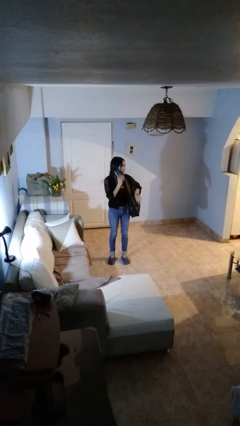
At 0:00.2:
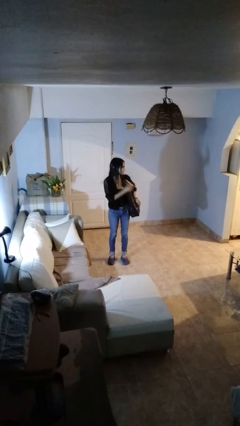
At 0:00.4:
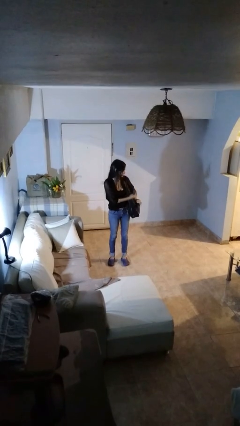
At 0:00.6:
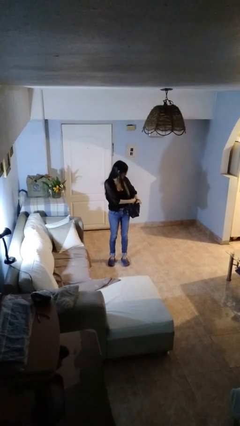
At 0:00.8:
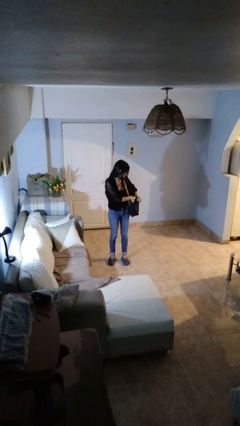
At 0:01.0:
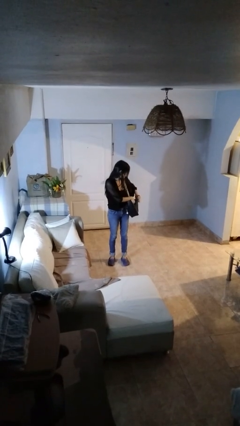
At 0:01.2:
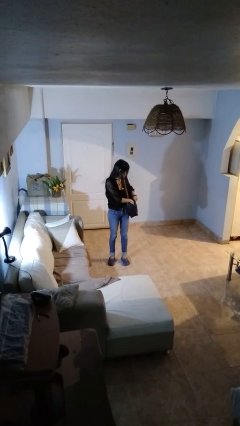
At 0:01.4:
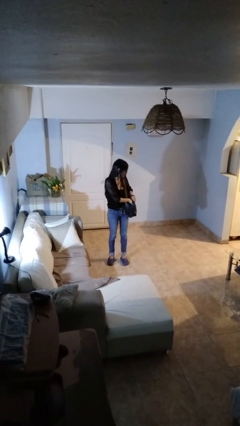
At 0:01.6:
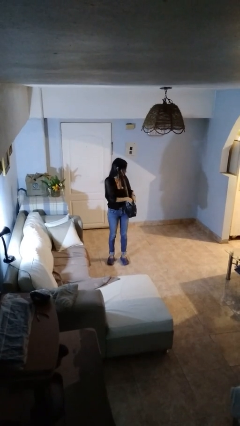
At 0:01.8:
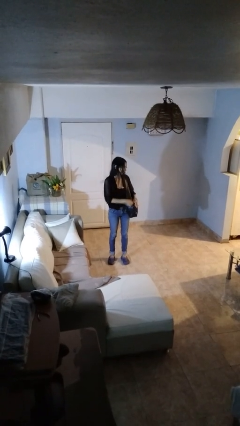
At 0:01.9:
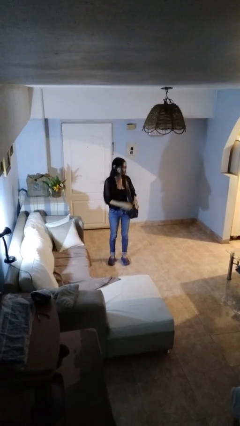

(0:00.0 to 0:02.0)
person puts object into purse

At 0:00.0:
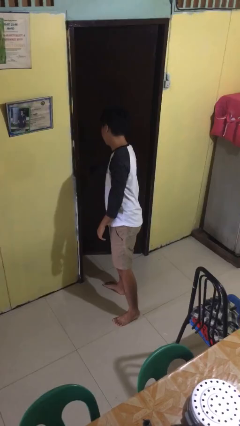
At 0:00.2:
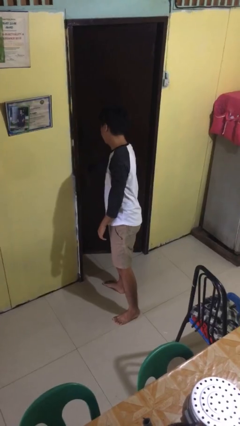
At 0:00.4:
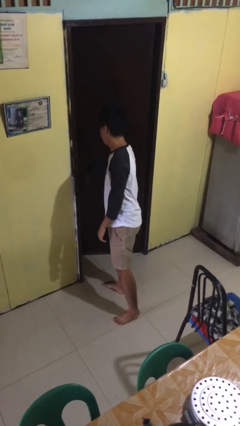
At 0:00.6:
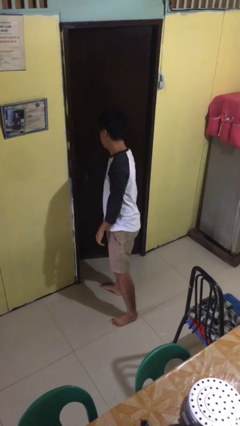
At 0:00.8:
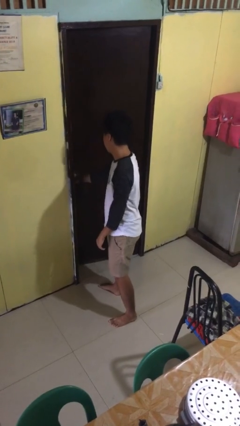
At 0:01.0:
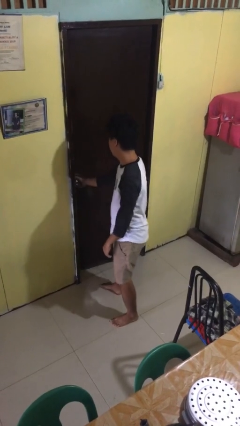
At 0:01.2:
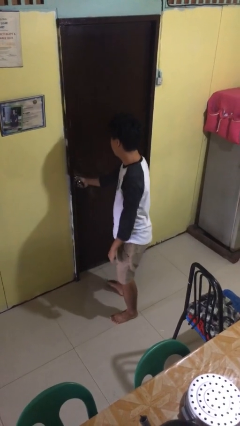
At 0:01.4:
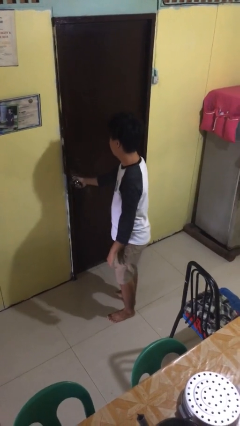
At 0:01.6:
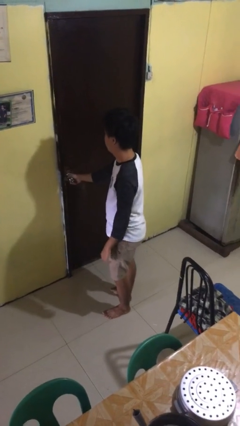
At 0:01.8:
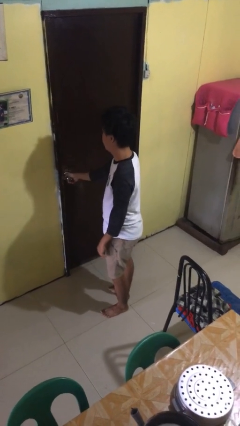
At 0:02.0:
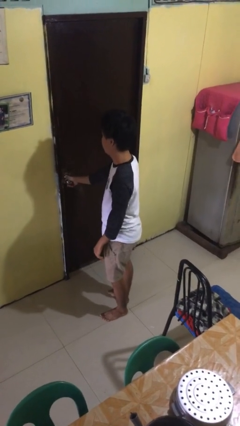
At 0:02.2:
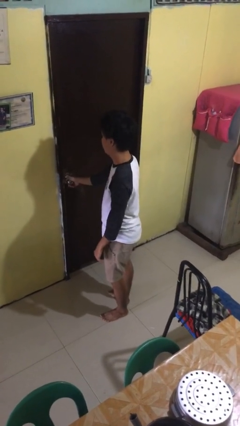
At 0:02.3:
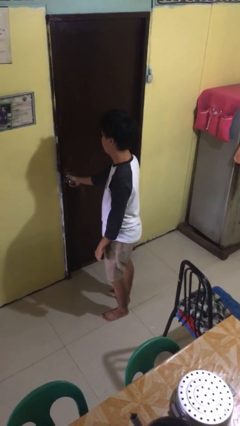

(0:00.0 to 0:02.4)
person closes facility door

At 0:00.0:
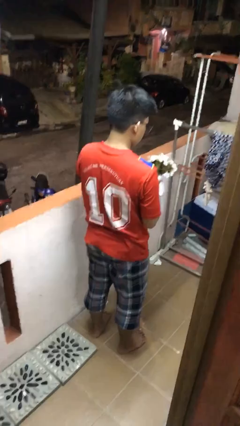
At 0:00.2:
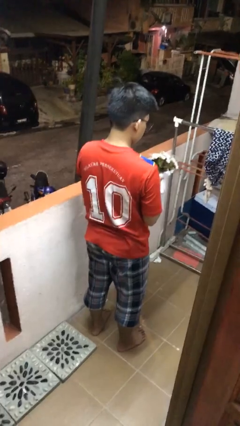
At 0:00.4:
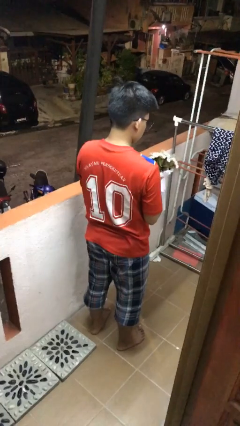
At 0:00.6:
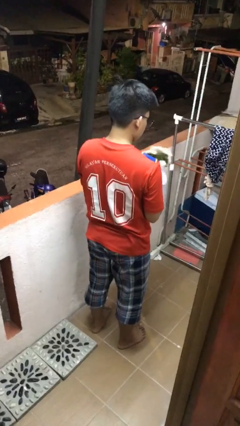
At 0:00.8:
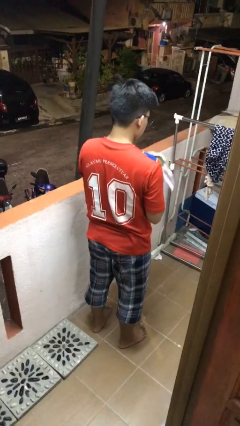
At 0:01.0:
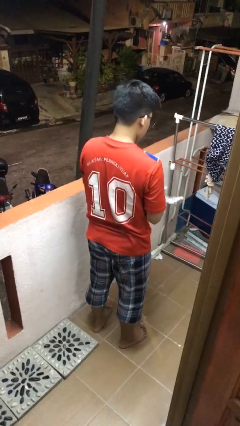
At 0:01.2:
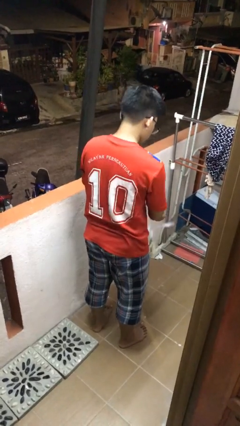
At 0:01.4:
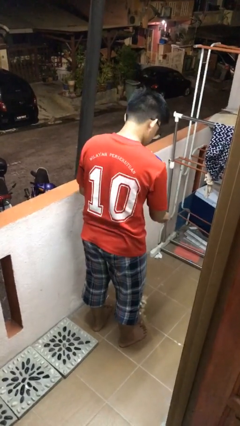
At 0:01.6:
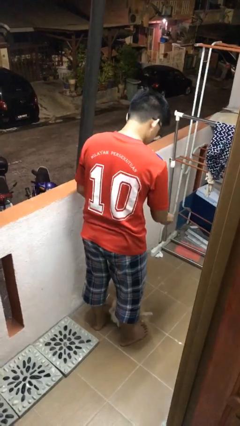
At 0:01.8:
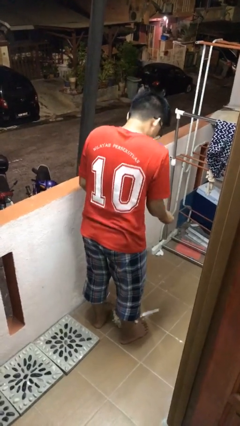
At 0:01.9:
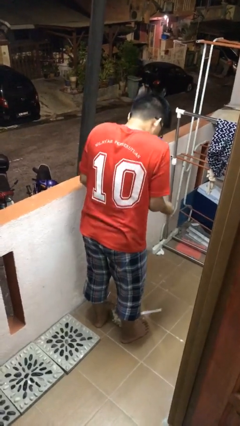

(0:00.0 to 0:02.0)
person drops object

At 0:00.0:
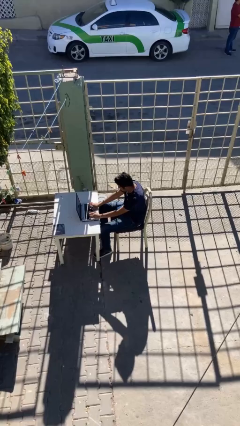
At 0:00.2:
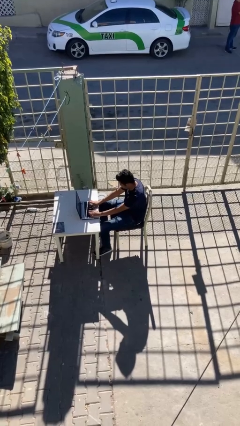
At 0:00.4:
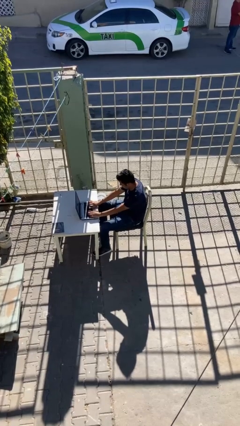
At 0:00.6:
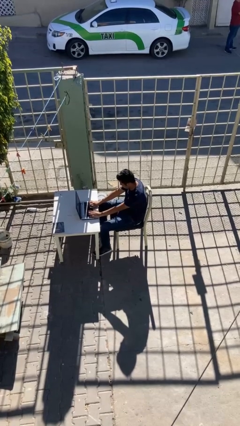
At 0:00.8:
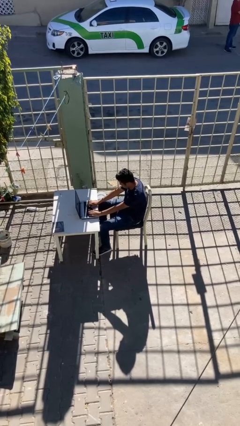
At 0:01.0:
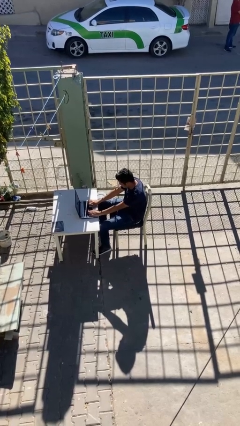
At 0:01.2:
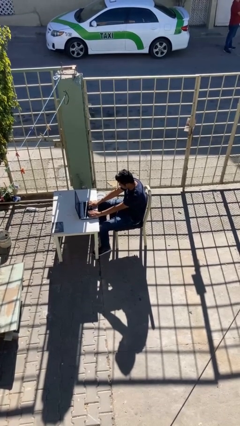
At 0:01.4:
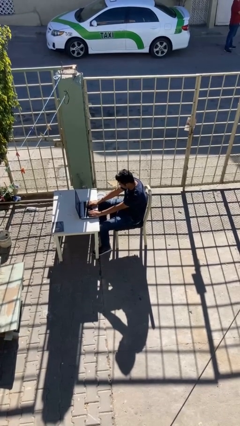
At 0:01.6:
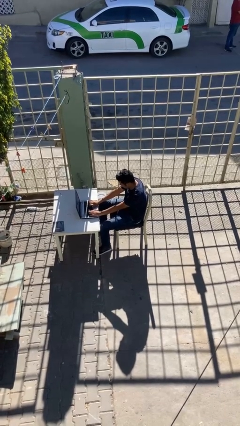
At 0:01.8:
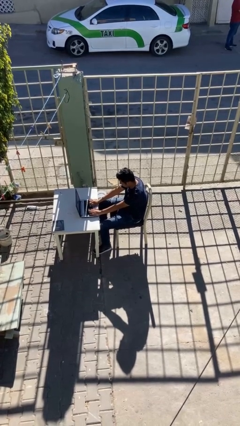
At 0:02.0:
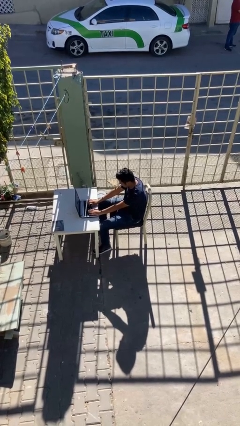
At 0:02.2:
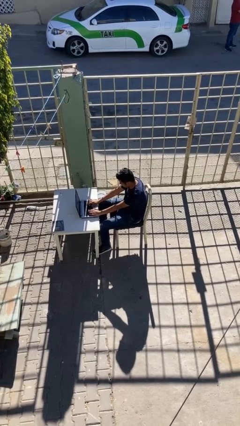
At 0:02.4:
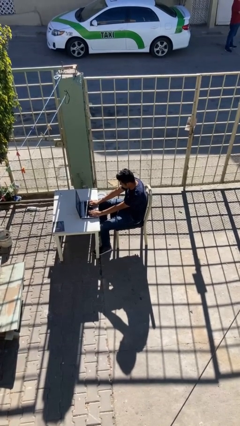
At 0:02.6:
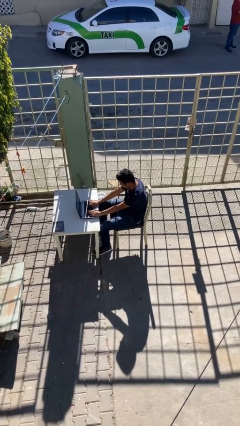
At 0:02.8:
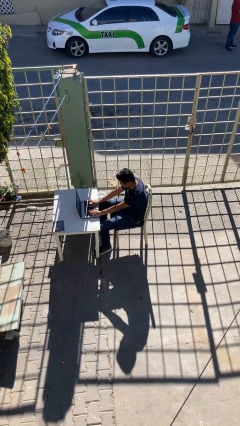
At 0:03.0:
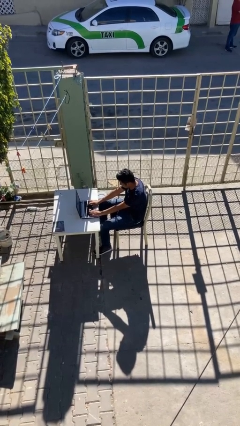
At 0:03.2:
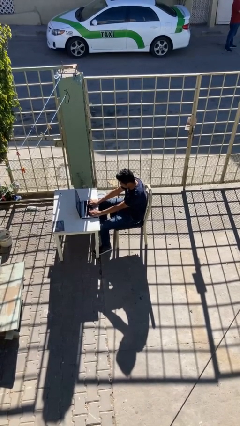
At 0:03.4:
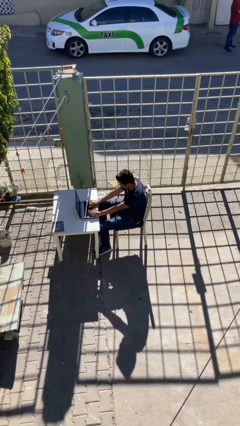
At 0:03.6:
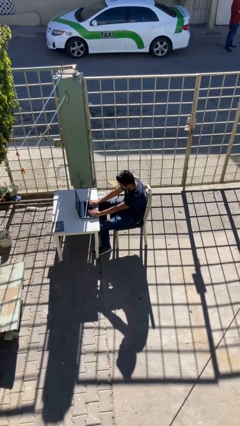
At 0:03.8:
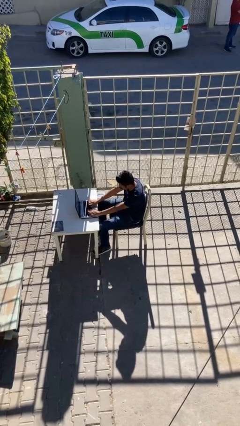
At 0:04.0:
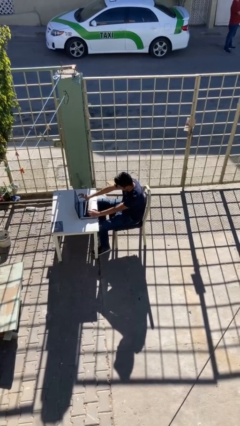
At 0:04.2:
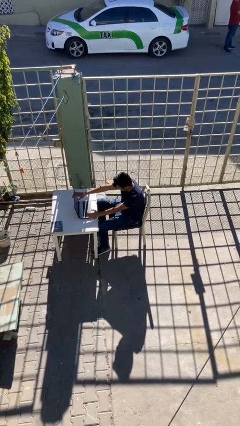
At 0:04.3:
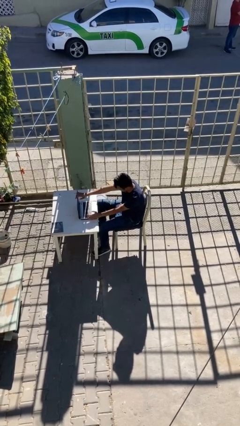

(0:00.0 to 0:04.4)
person interacts with laptop

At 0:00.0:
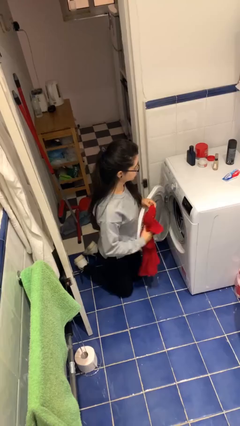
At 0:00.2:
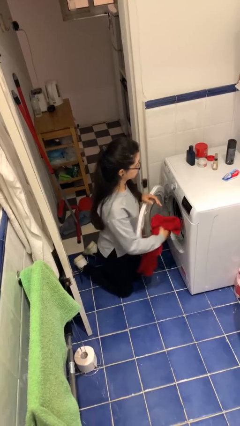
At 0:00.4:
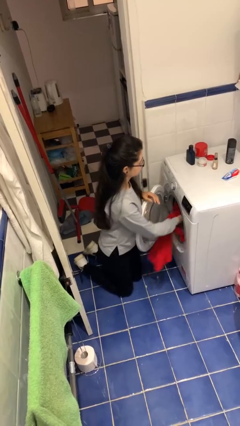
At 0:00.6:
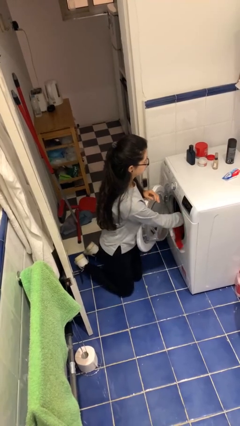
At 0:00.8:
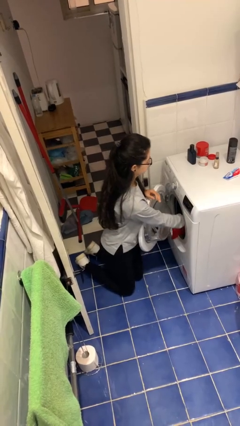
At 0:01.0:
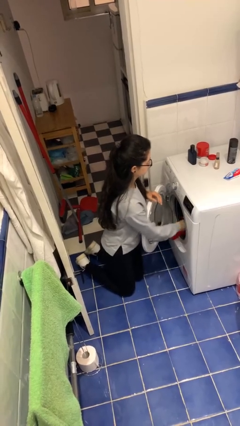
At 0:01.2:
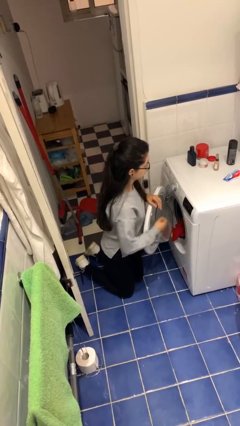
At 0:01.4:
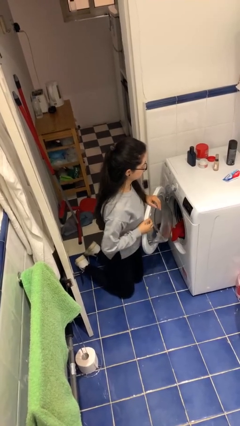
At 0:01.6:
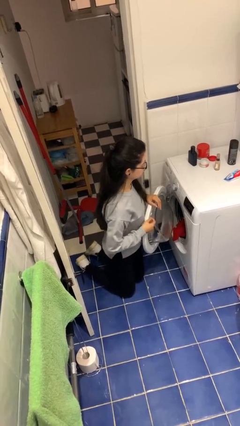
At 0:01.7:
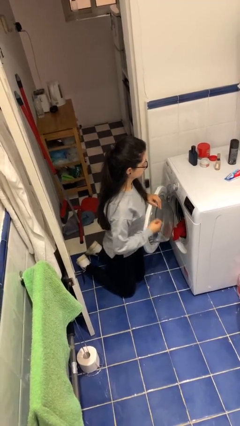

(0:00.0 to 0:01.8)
person loads dryer

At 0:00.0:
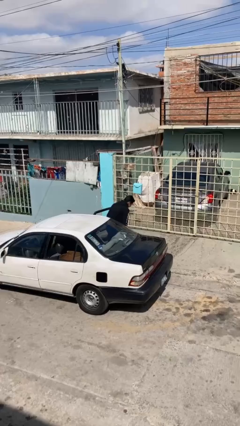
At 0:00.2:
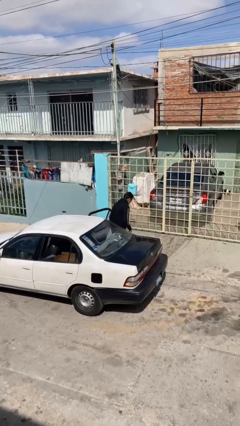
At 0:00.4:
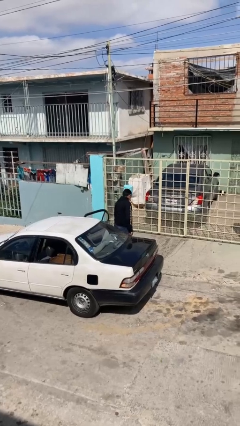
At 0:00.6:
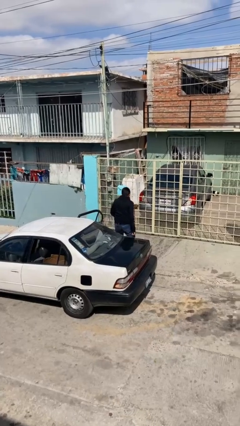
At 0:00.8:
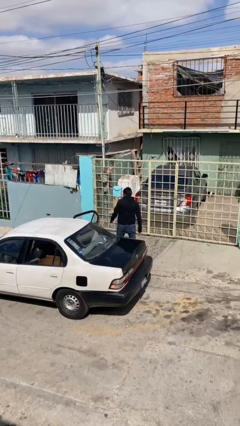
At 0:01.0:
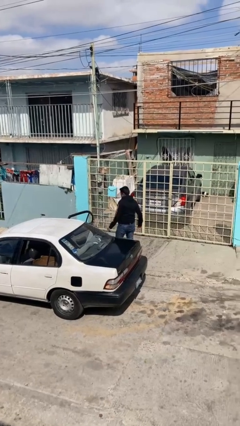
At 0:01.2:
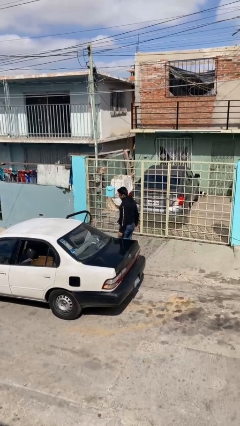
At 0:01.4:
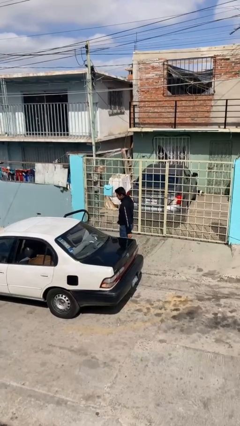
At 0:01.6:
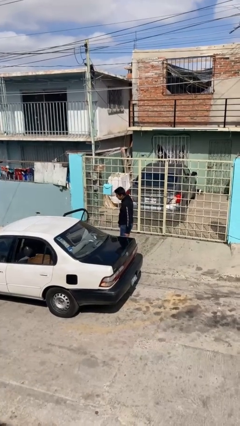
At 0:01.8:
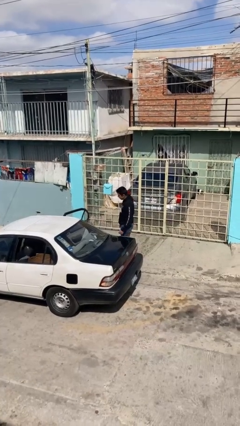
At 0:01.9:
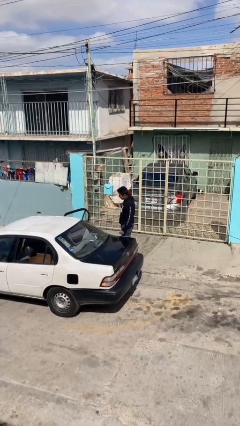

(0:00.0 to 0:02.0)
person exits car

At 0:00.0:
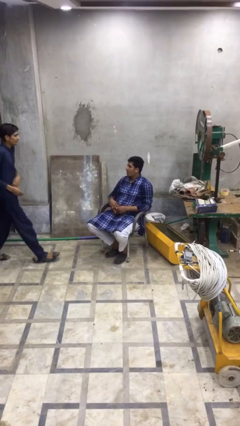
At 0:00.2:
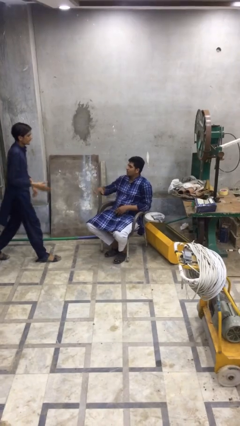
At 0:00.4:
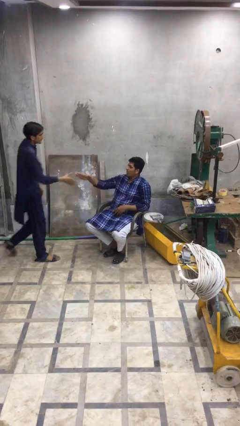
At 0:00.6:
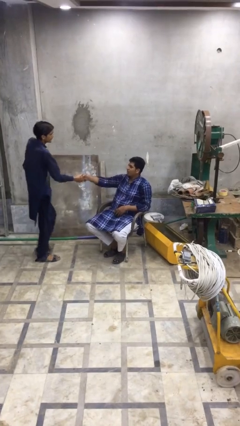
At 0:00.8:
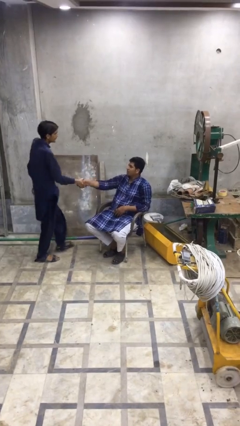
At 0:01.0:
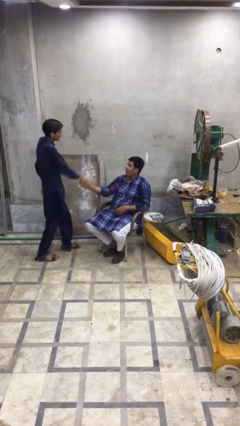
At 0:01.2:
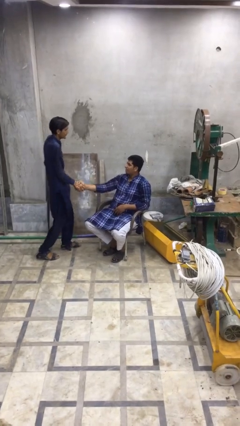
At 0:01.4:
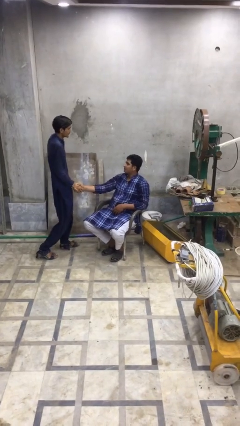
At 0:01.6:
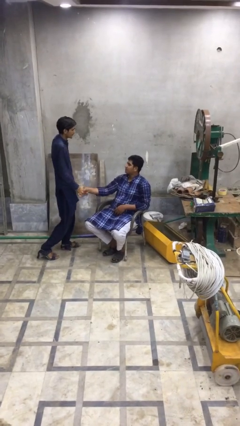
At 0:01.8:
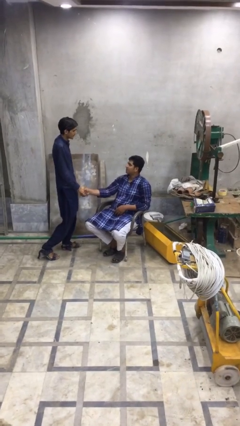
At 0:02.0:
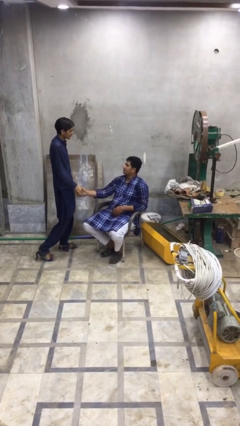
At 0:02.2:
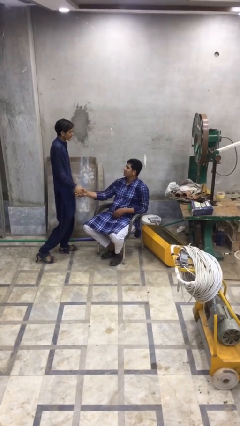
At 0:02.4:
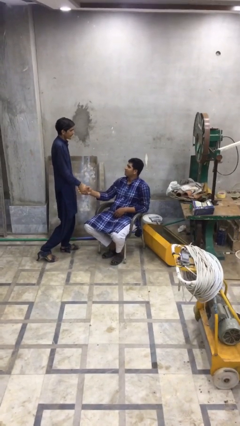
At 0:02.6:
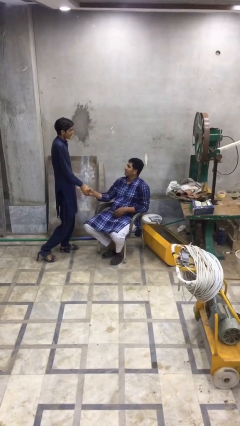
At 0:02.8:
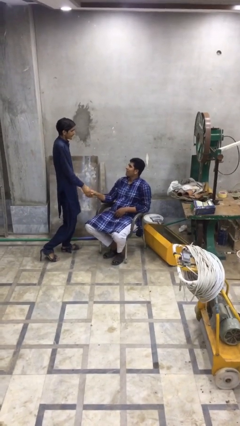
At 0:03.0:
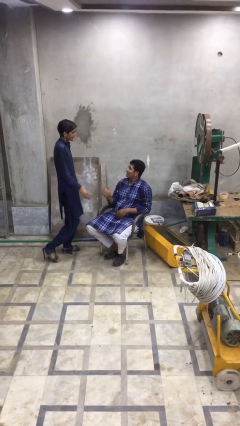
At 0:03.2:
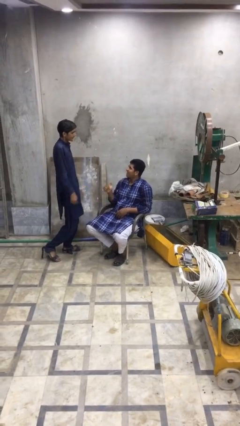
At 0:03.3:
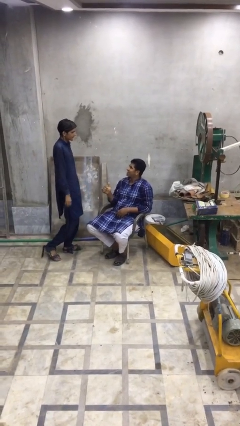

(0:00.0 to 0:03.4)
person shakes hand
